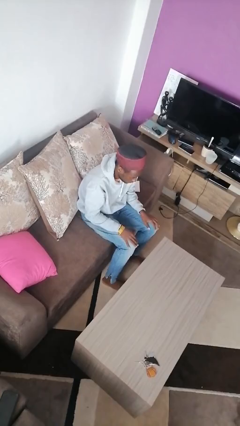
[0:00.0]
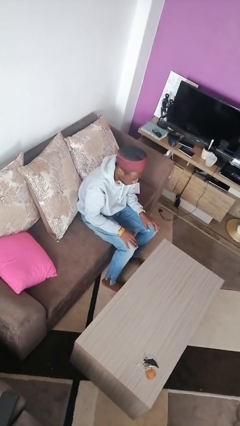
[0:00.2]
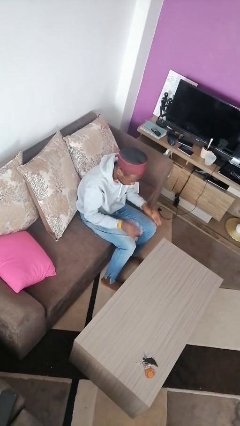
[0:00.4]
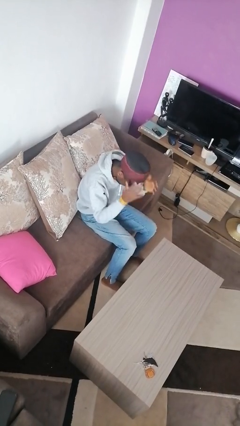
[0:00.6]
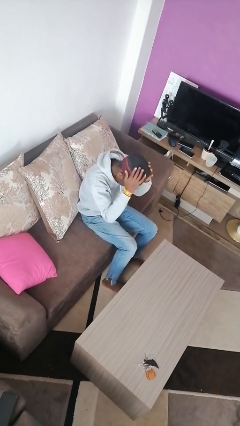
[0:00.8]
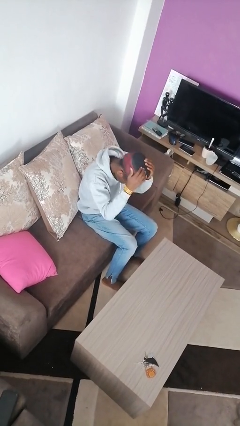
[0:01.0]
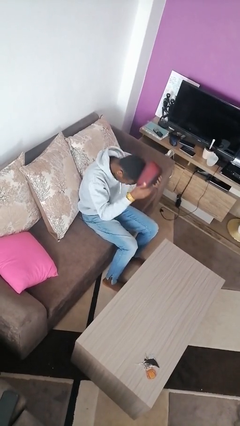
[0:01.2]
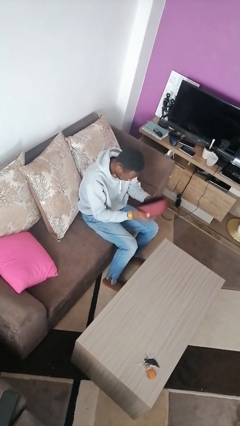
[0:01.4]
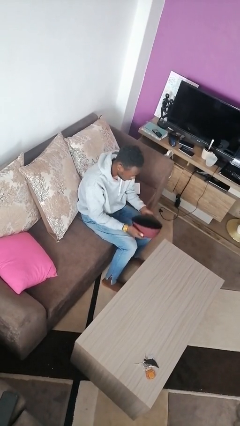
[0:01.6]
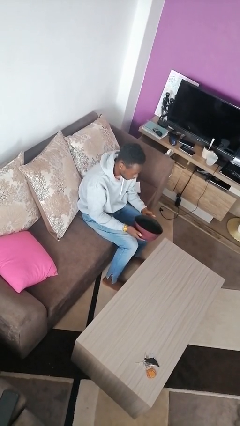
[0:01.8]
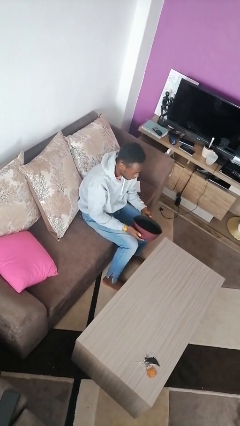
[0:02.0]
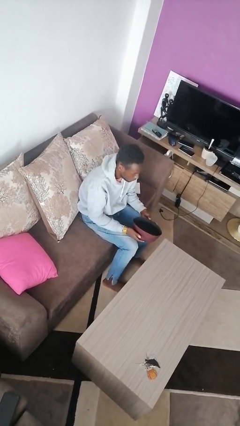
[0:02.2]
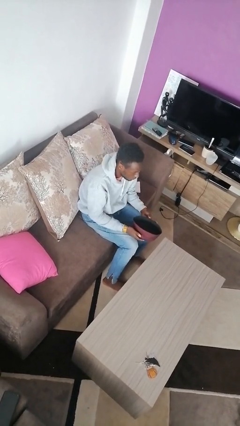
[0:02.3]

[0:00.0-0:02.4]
person takes off hat

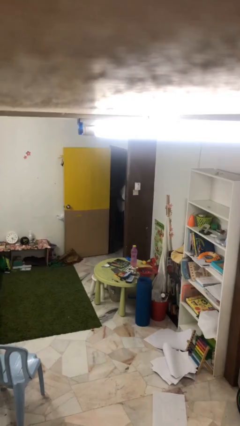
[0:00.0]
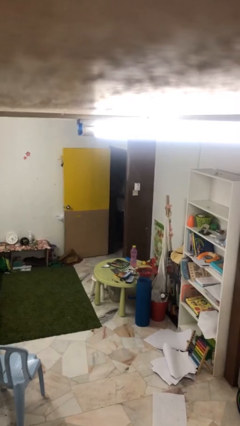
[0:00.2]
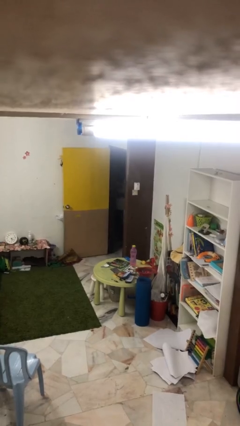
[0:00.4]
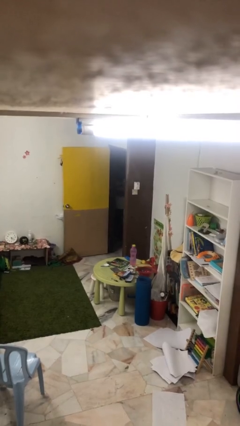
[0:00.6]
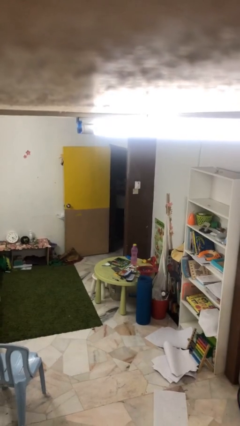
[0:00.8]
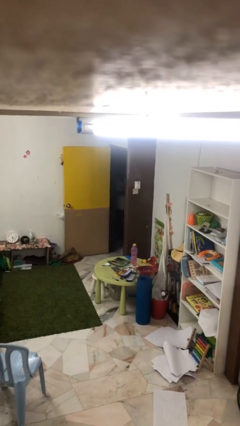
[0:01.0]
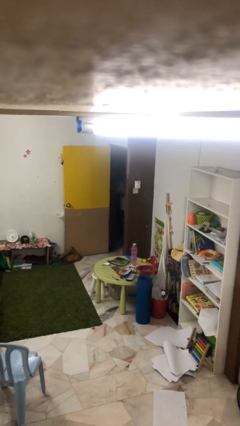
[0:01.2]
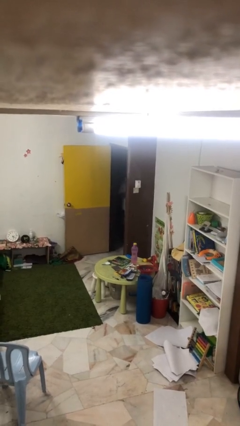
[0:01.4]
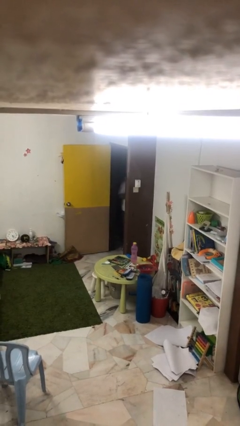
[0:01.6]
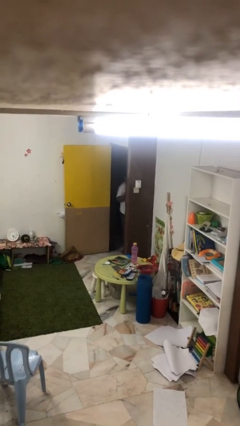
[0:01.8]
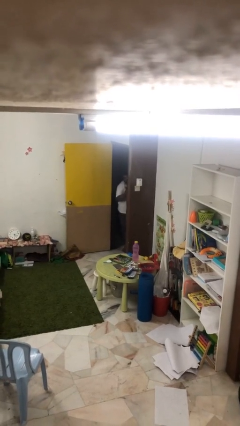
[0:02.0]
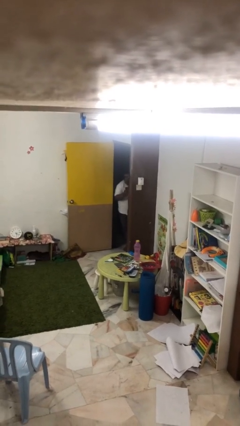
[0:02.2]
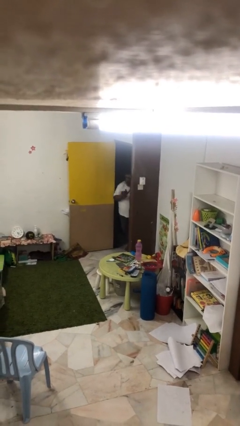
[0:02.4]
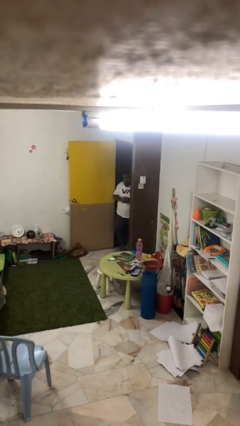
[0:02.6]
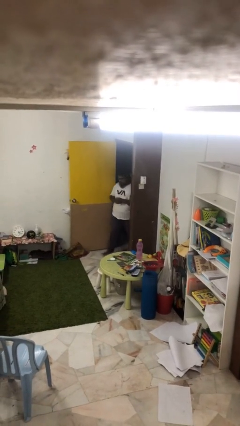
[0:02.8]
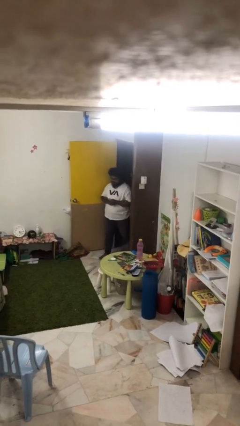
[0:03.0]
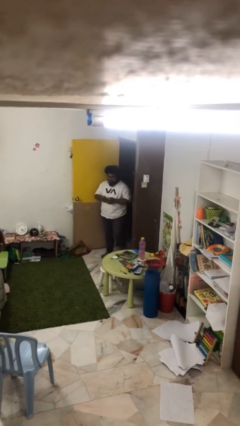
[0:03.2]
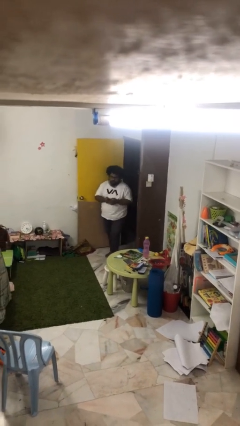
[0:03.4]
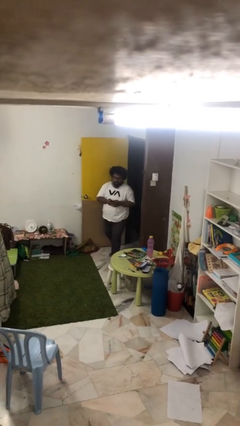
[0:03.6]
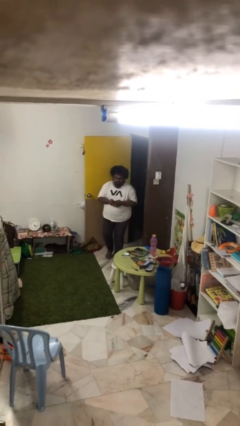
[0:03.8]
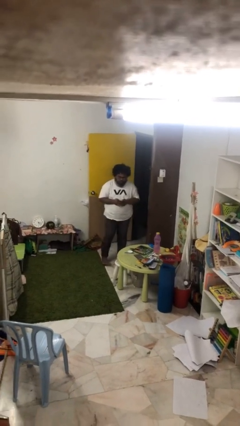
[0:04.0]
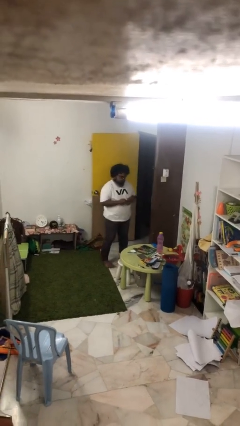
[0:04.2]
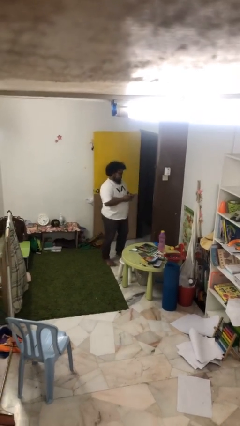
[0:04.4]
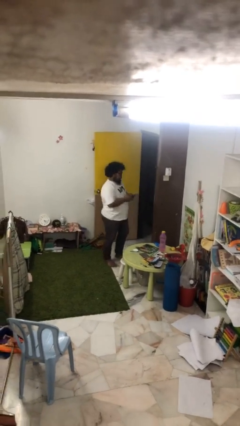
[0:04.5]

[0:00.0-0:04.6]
person enters scene through structure

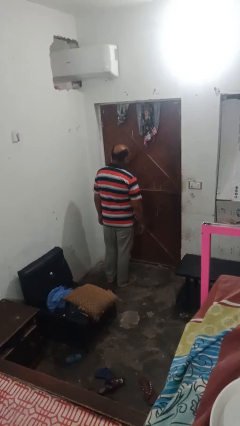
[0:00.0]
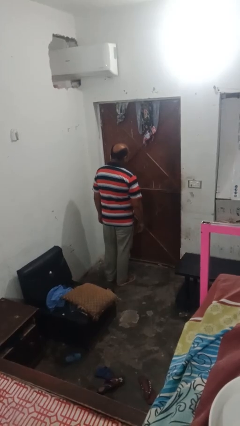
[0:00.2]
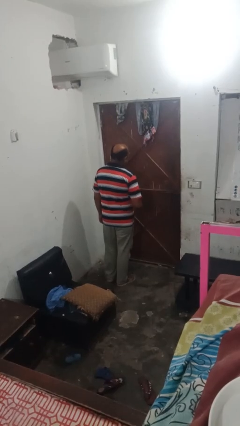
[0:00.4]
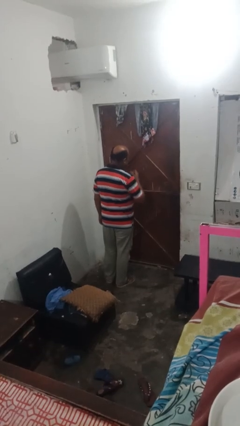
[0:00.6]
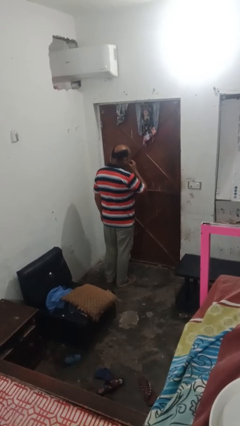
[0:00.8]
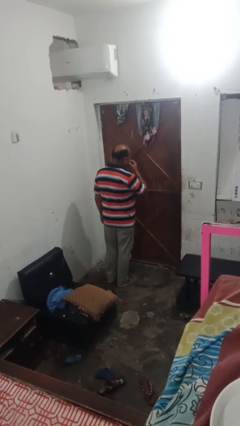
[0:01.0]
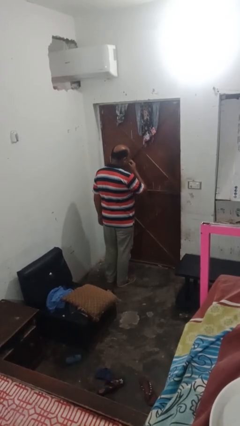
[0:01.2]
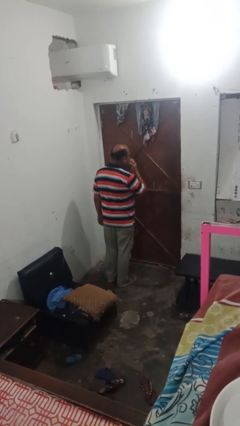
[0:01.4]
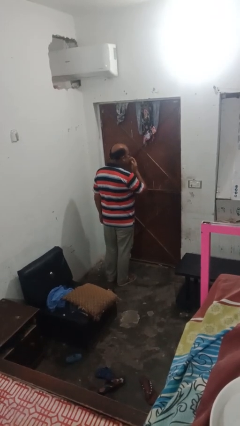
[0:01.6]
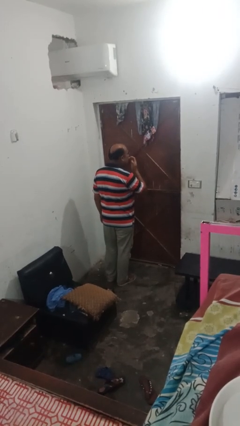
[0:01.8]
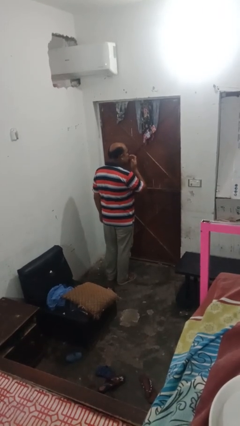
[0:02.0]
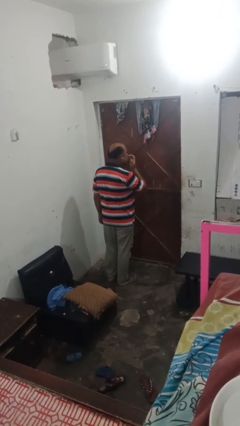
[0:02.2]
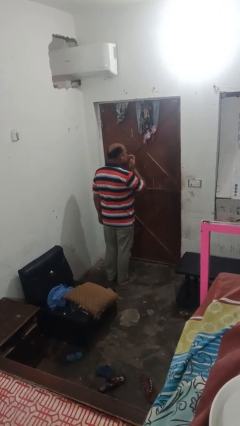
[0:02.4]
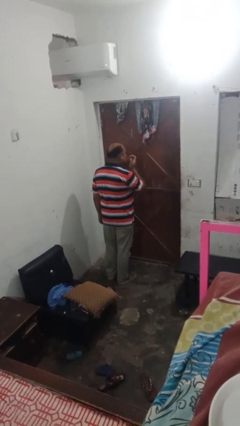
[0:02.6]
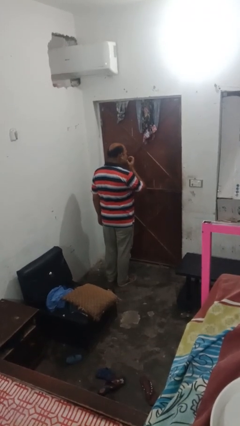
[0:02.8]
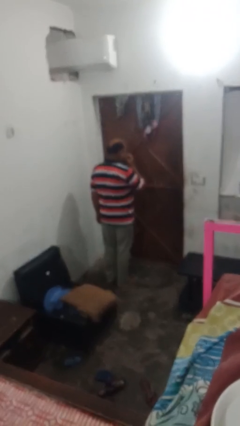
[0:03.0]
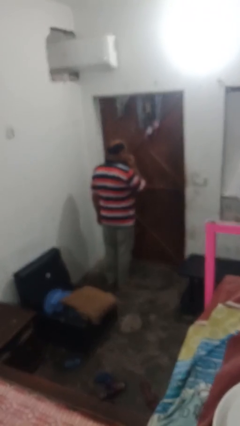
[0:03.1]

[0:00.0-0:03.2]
person licks fingers

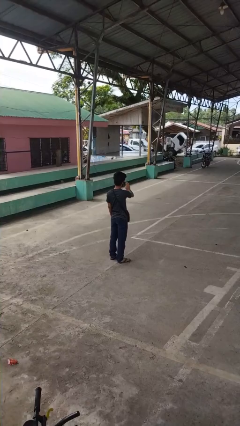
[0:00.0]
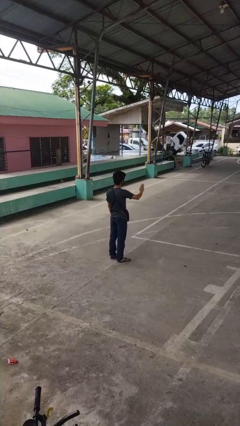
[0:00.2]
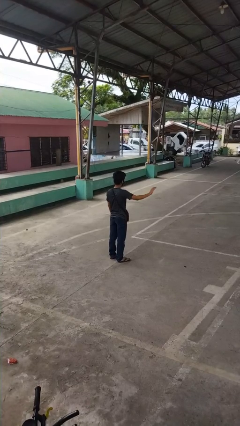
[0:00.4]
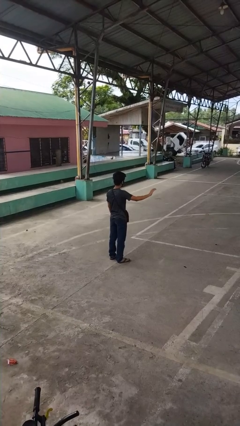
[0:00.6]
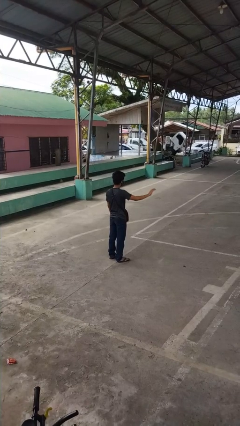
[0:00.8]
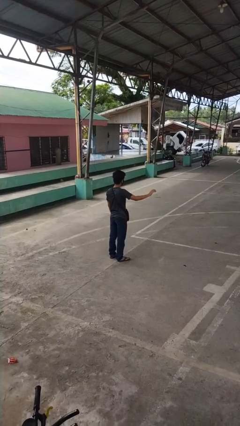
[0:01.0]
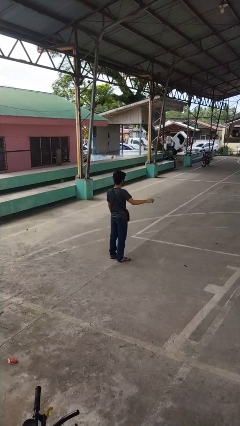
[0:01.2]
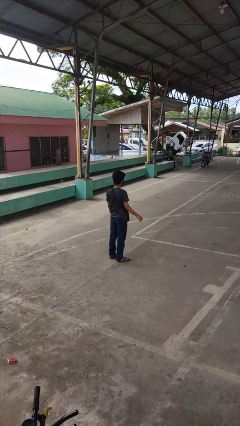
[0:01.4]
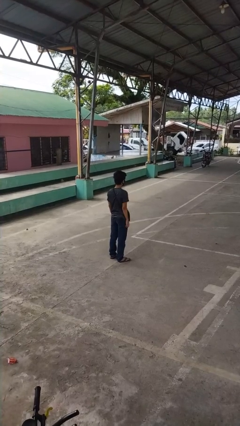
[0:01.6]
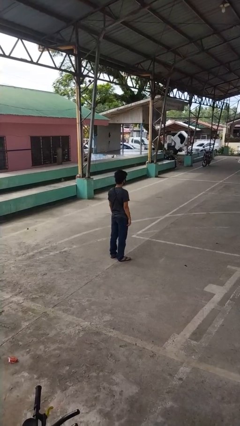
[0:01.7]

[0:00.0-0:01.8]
person gestures swipe right

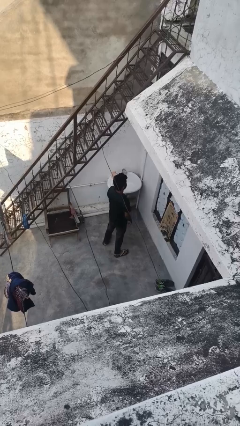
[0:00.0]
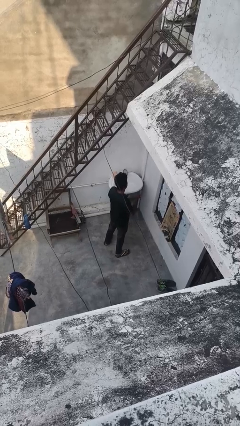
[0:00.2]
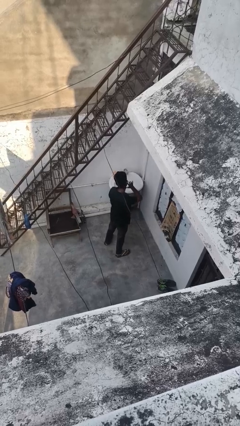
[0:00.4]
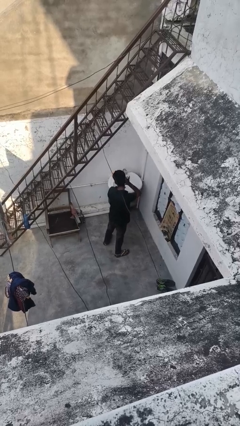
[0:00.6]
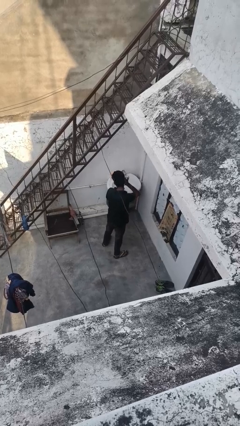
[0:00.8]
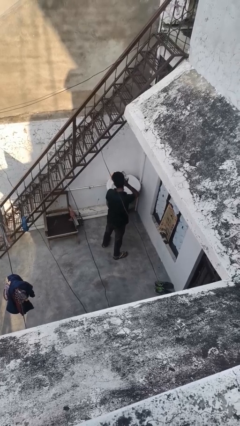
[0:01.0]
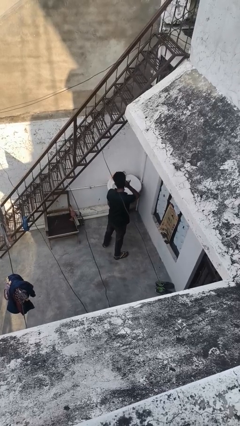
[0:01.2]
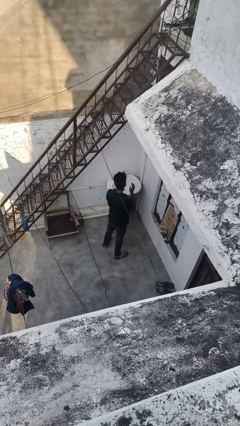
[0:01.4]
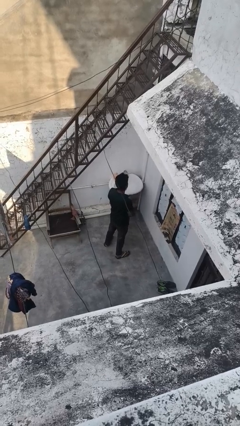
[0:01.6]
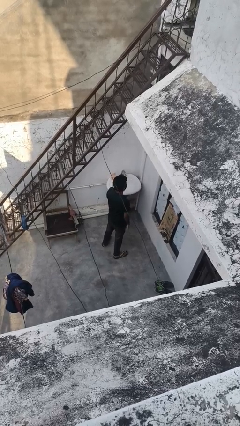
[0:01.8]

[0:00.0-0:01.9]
person gestures listen closely

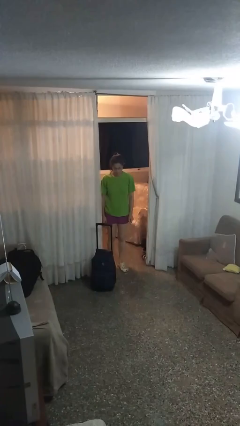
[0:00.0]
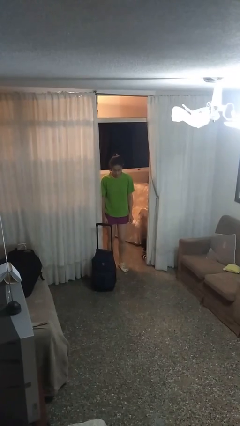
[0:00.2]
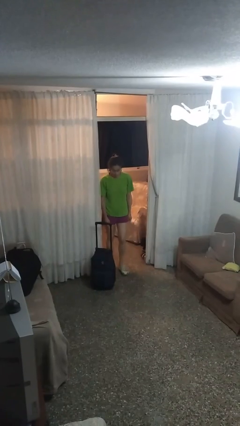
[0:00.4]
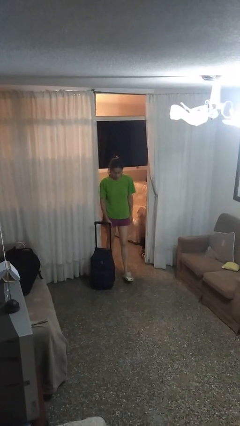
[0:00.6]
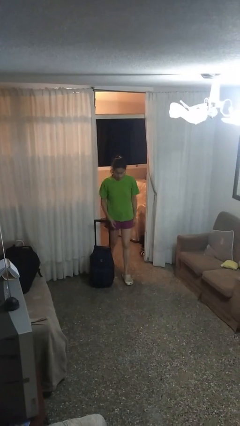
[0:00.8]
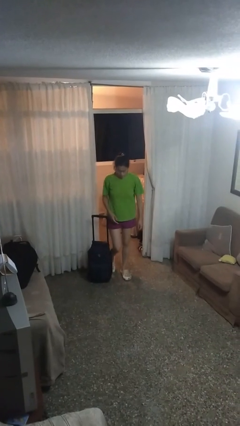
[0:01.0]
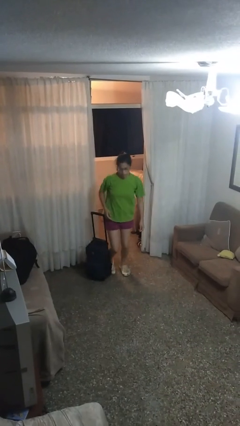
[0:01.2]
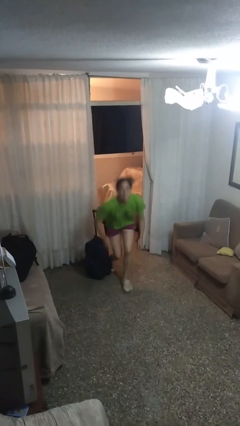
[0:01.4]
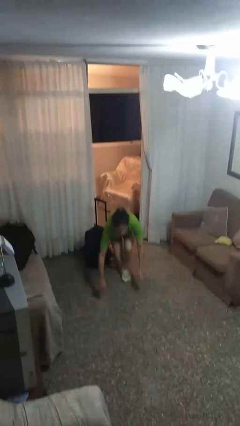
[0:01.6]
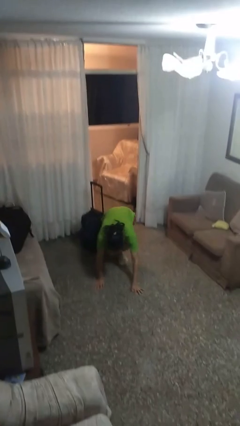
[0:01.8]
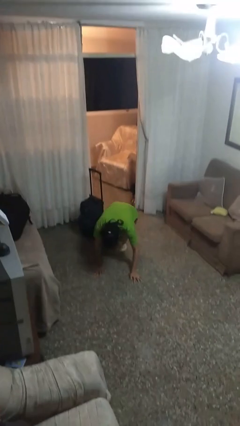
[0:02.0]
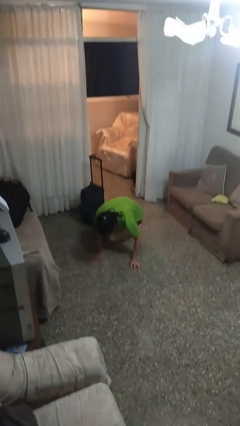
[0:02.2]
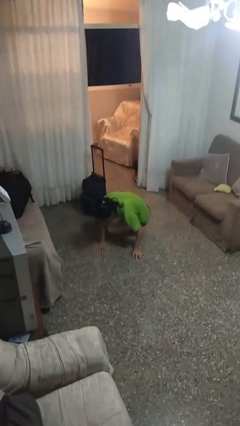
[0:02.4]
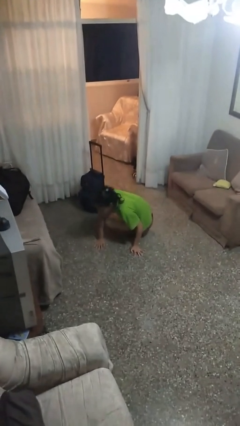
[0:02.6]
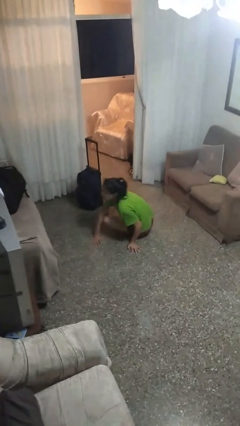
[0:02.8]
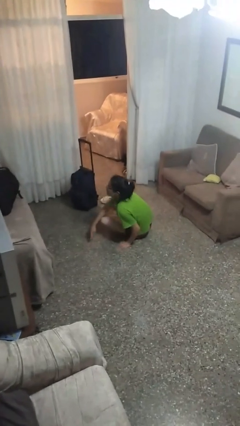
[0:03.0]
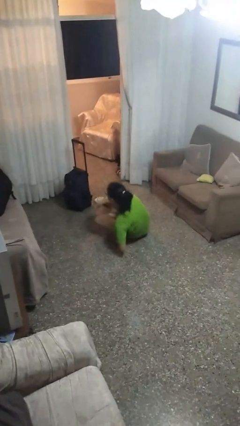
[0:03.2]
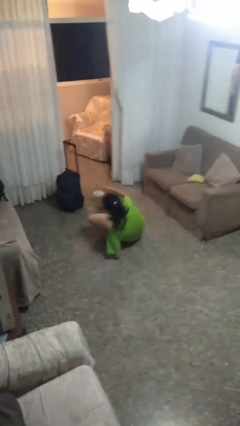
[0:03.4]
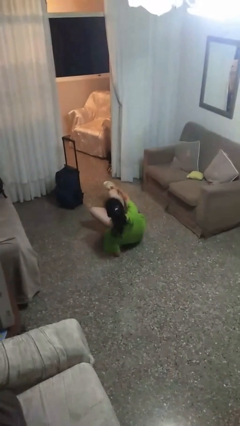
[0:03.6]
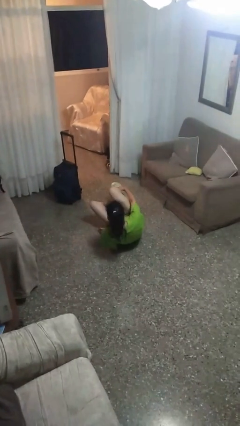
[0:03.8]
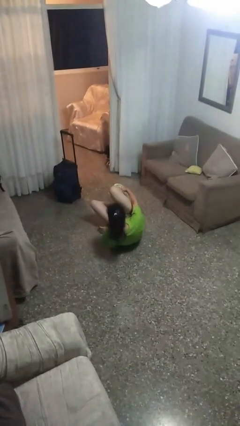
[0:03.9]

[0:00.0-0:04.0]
person trips on object on floor
